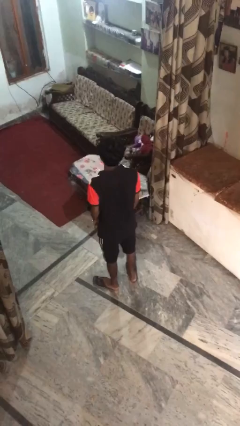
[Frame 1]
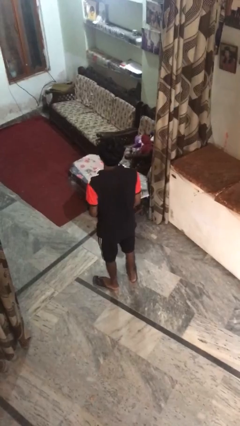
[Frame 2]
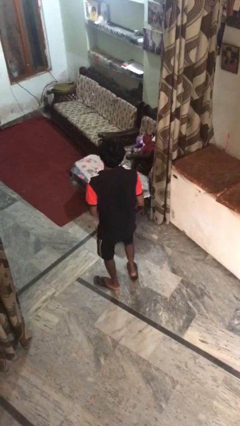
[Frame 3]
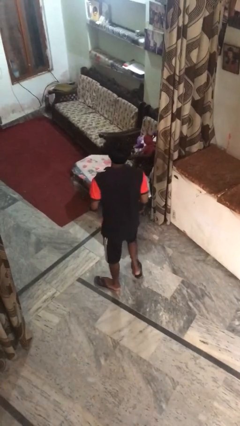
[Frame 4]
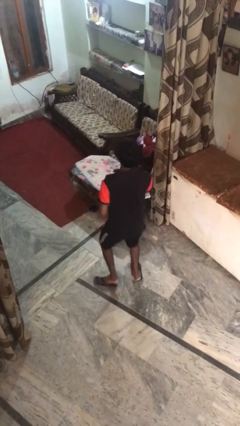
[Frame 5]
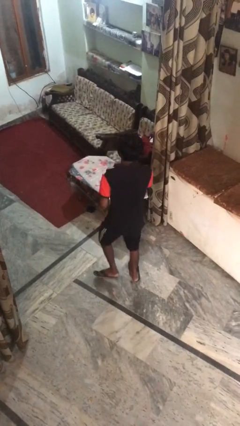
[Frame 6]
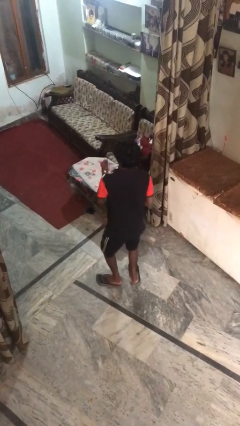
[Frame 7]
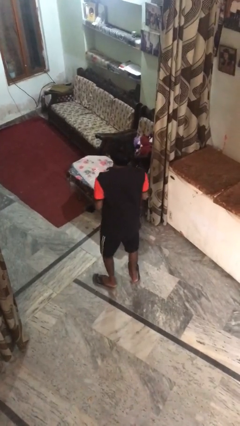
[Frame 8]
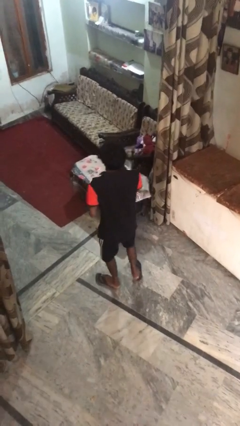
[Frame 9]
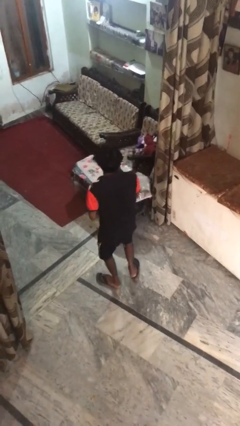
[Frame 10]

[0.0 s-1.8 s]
person dances in place

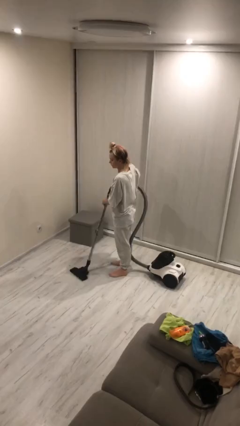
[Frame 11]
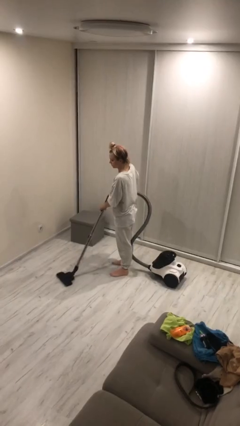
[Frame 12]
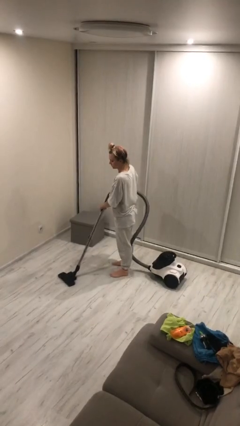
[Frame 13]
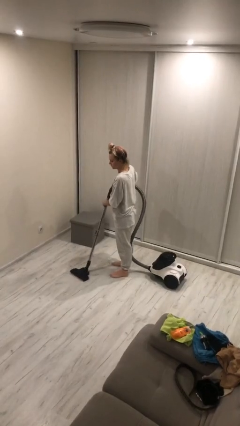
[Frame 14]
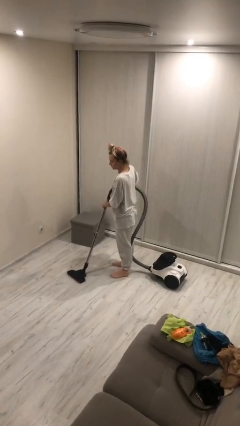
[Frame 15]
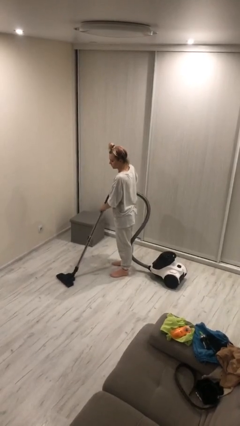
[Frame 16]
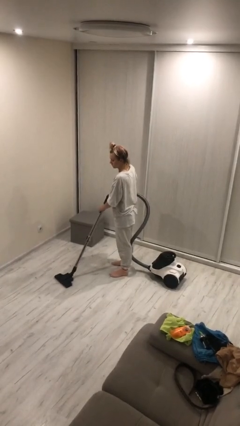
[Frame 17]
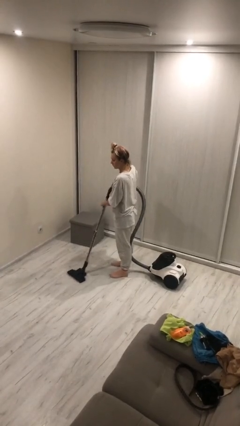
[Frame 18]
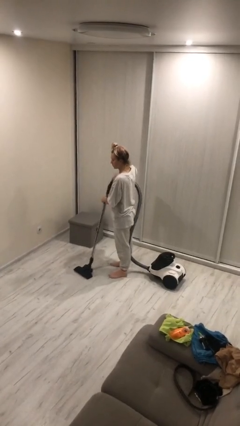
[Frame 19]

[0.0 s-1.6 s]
person vacuums carpet

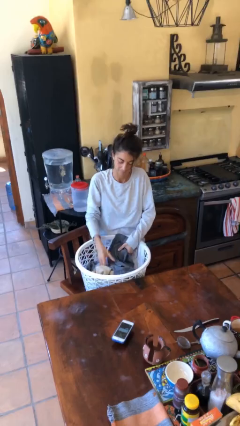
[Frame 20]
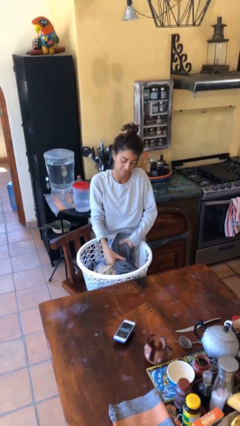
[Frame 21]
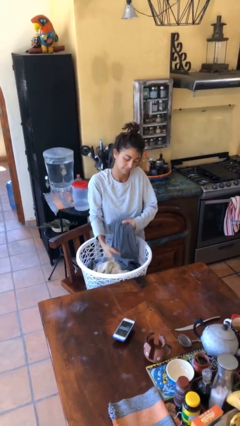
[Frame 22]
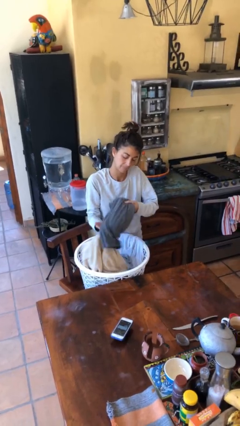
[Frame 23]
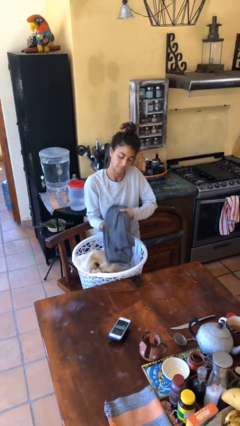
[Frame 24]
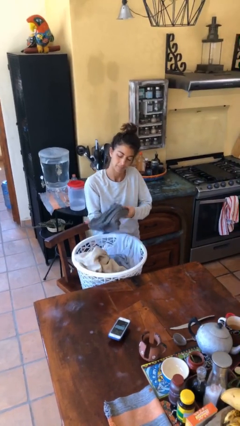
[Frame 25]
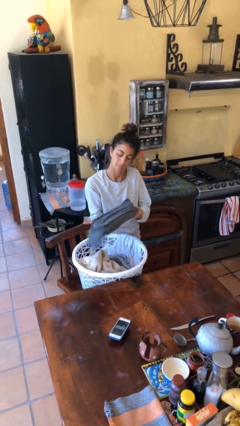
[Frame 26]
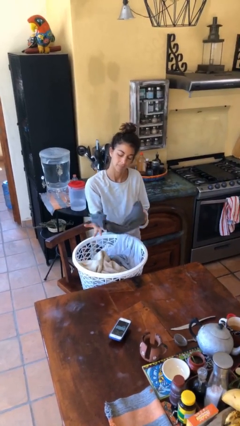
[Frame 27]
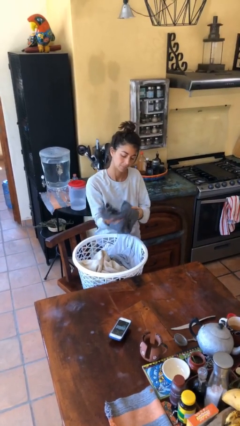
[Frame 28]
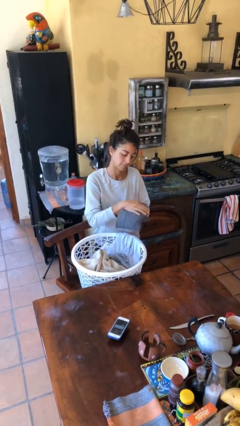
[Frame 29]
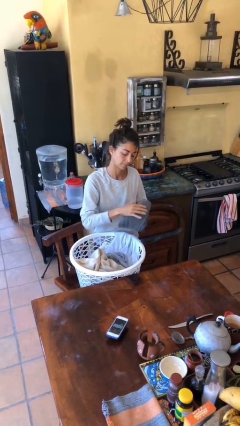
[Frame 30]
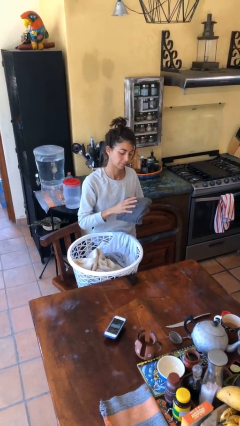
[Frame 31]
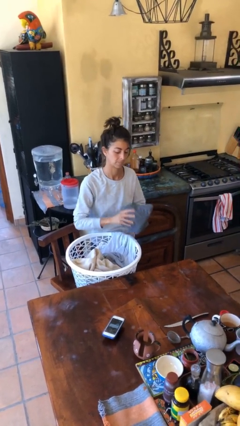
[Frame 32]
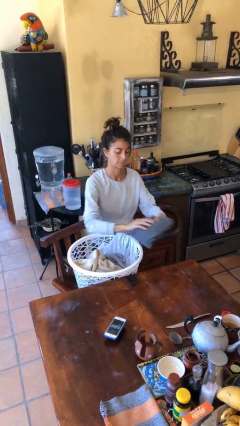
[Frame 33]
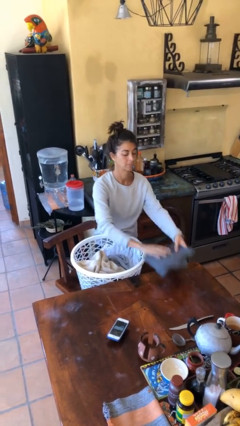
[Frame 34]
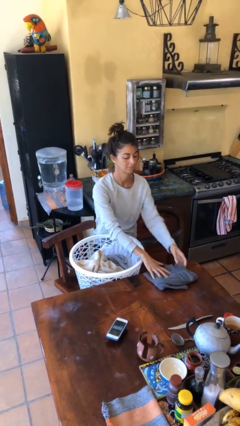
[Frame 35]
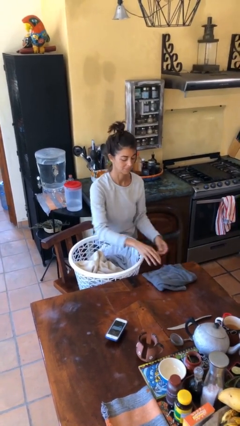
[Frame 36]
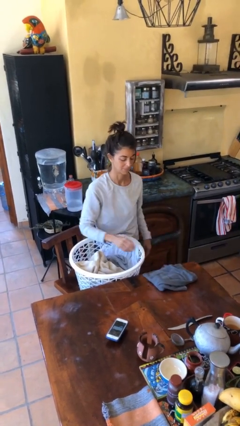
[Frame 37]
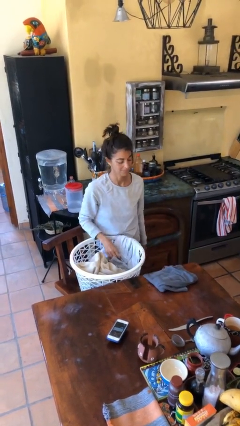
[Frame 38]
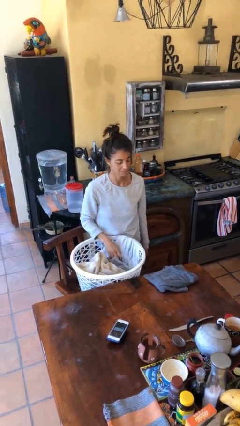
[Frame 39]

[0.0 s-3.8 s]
person folds pants

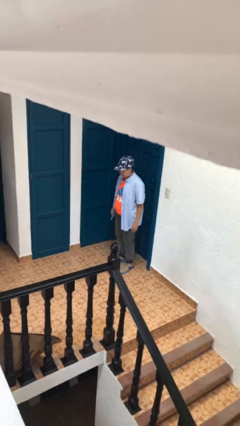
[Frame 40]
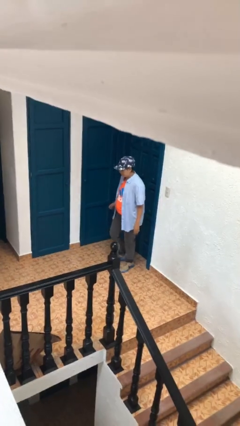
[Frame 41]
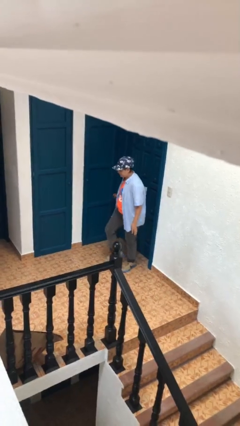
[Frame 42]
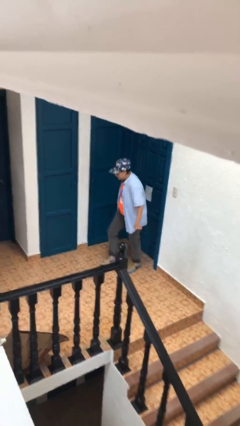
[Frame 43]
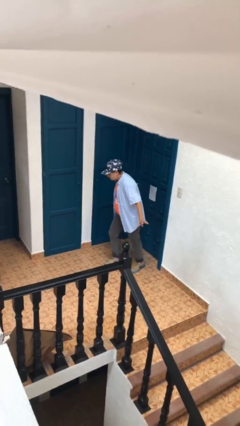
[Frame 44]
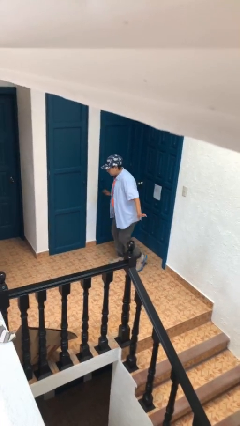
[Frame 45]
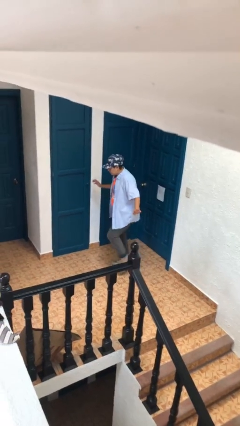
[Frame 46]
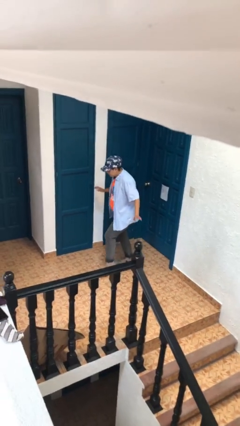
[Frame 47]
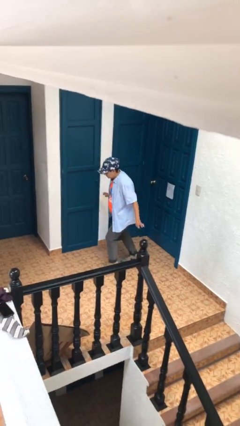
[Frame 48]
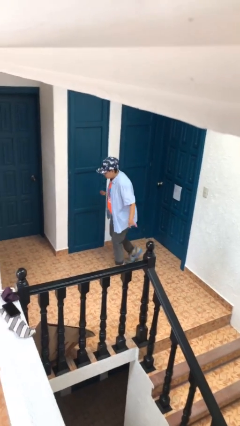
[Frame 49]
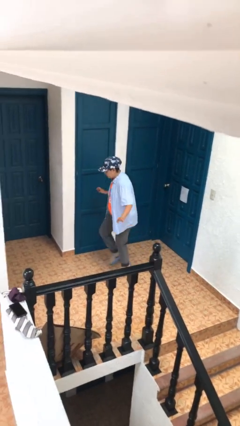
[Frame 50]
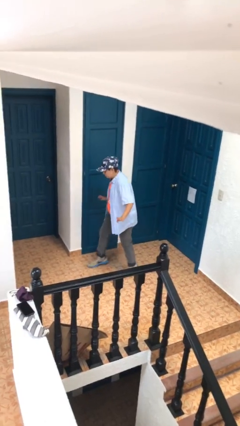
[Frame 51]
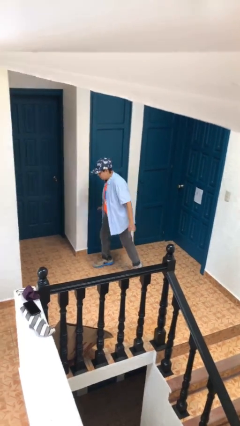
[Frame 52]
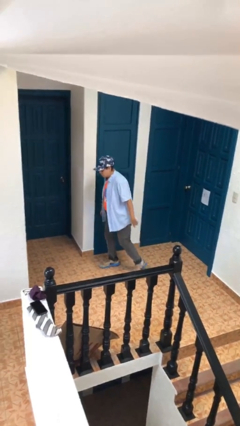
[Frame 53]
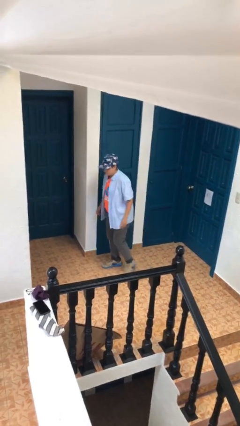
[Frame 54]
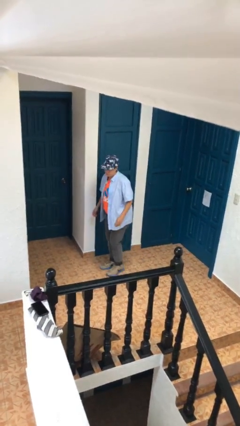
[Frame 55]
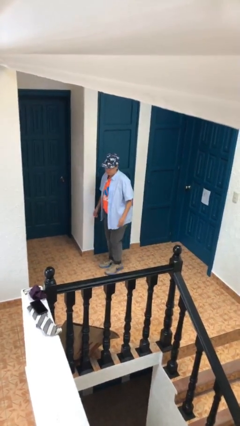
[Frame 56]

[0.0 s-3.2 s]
person walks tiptoe

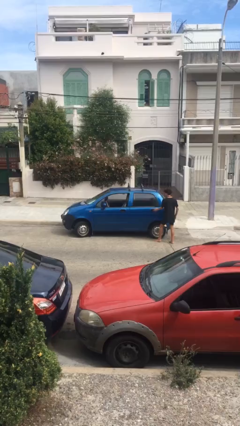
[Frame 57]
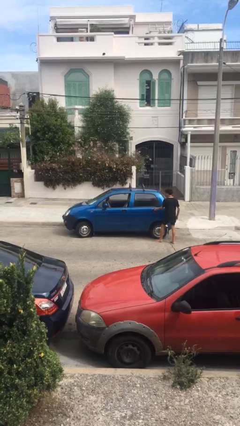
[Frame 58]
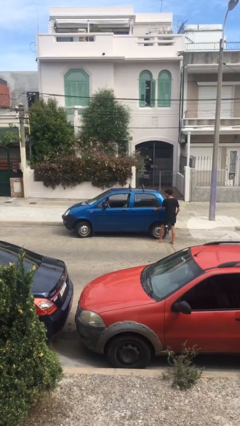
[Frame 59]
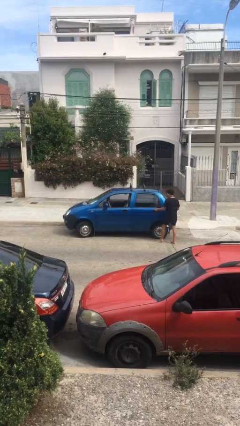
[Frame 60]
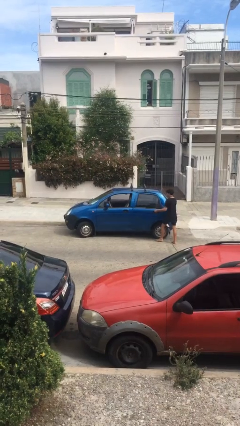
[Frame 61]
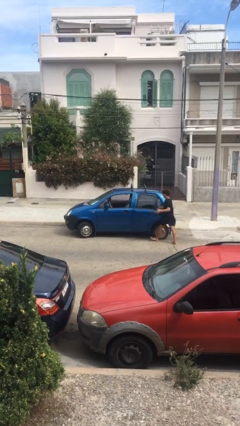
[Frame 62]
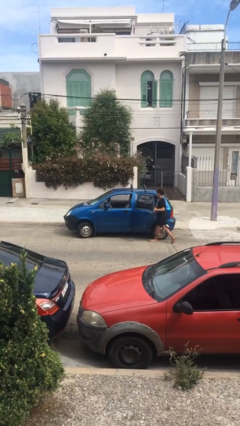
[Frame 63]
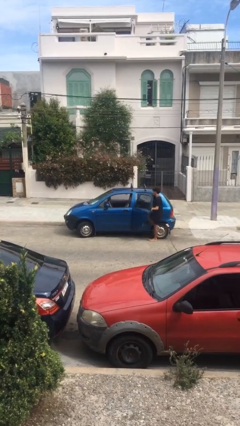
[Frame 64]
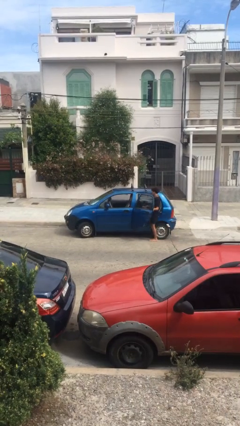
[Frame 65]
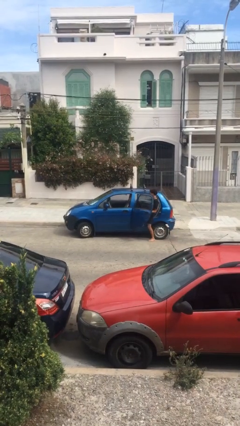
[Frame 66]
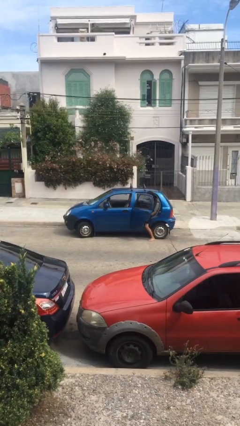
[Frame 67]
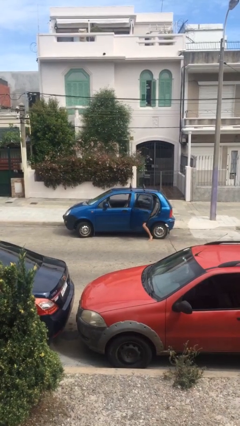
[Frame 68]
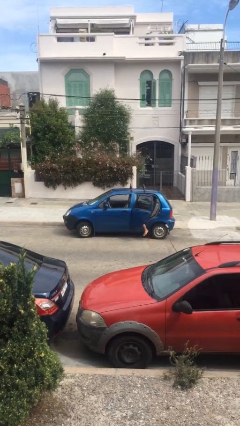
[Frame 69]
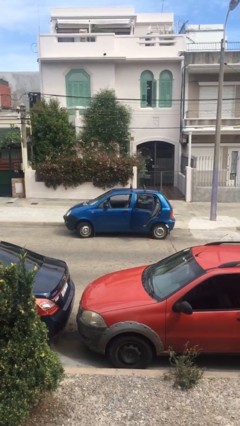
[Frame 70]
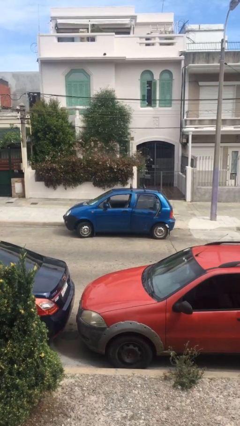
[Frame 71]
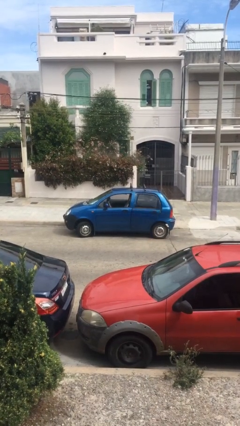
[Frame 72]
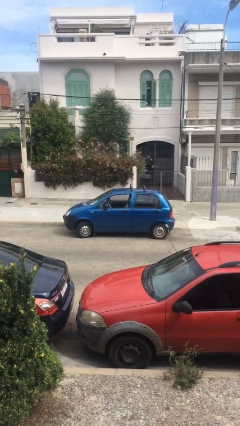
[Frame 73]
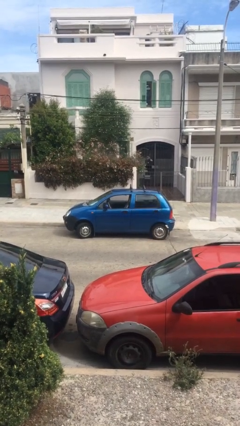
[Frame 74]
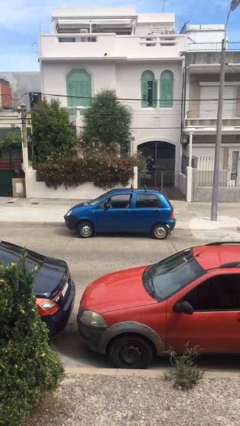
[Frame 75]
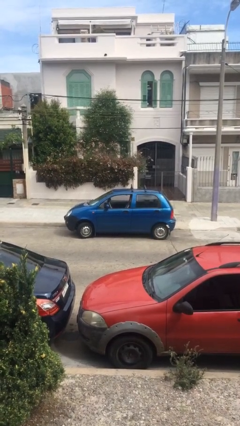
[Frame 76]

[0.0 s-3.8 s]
car picks up person

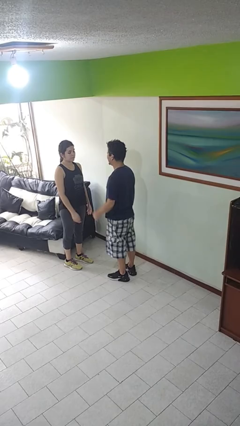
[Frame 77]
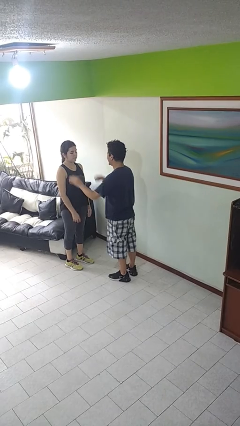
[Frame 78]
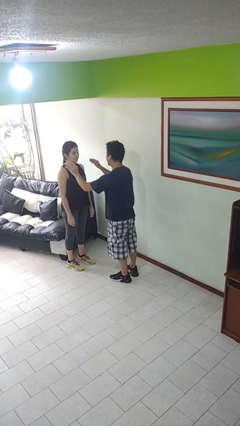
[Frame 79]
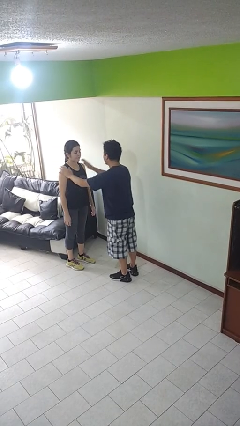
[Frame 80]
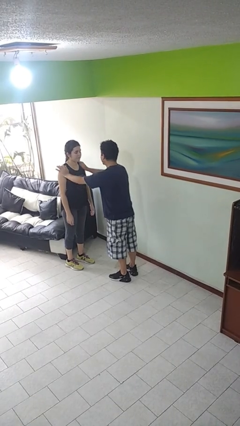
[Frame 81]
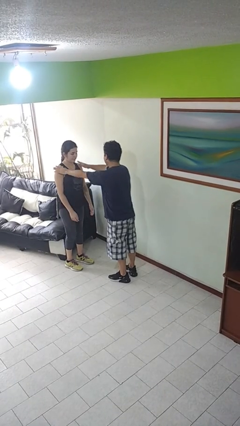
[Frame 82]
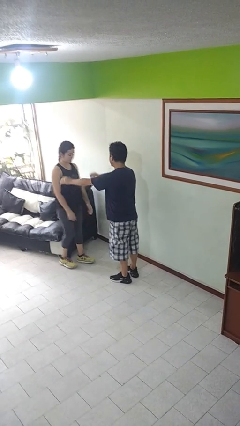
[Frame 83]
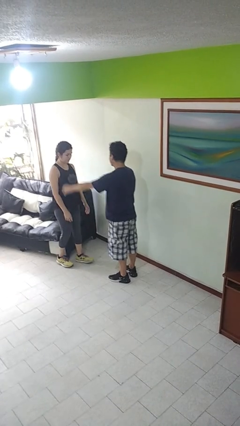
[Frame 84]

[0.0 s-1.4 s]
person shoves person

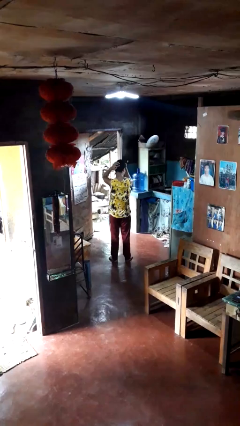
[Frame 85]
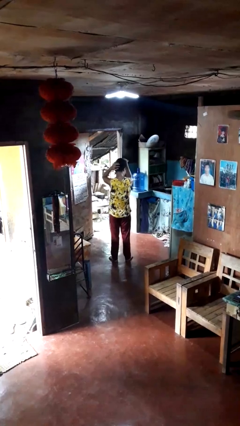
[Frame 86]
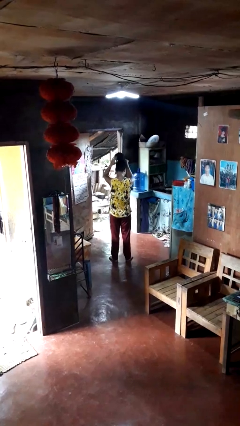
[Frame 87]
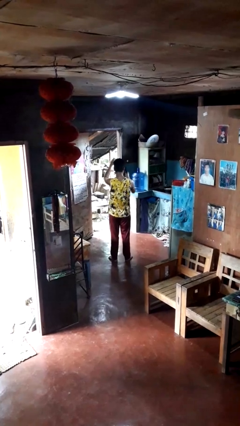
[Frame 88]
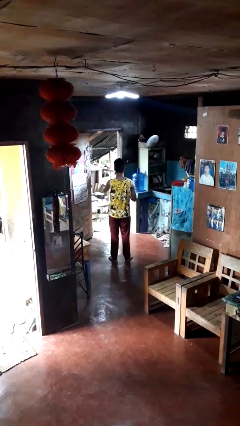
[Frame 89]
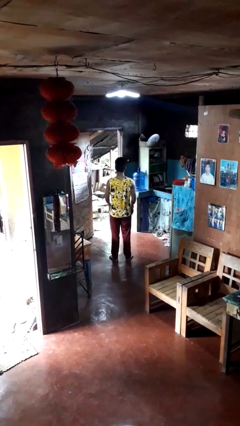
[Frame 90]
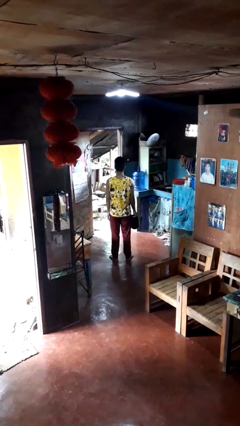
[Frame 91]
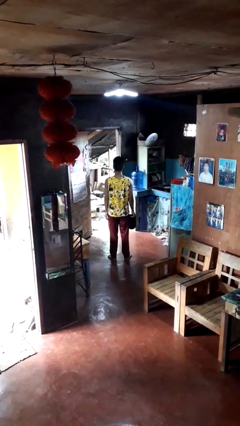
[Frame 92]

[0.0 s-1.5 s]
person takes off hat

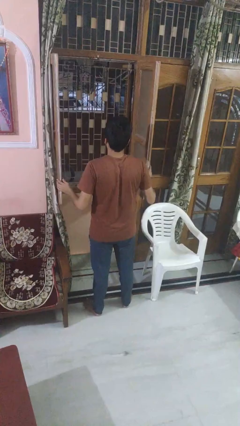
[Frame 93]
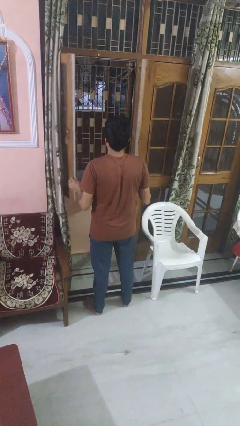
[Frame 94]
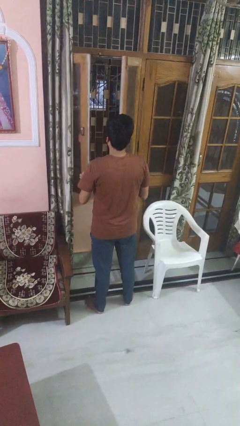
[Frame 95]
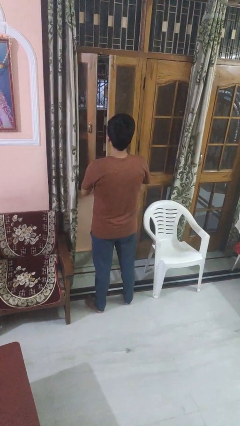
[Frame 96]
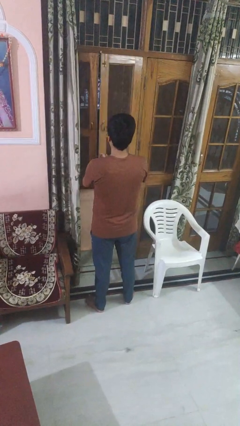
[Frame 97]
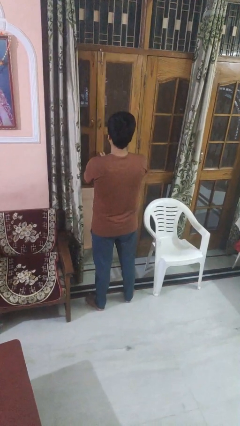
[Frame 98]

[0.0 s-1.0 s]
person closes home window
